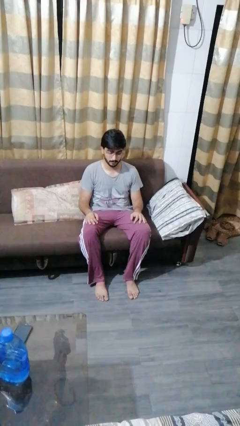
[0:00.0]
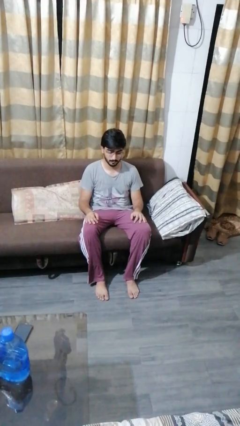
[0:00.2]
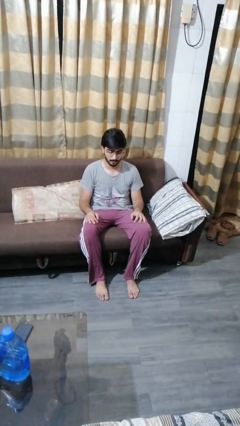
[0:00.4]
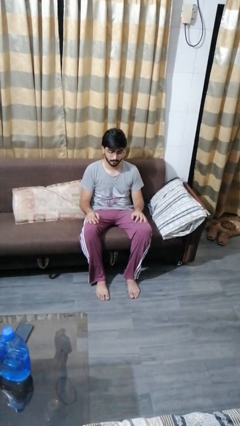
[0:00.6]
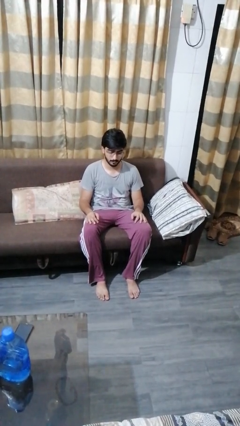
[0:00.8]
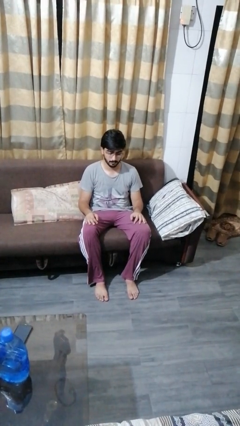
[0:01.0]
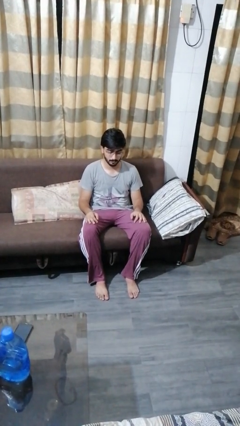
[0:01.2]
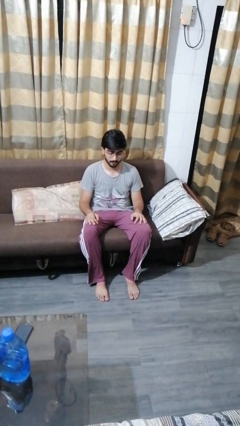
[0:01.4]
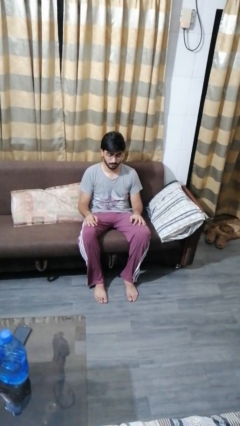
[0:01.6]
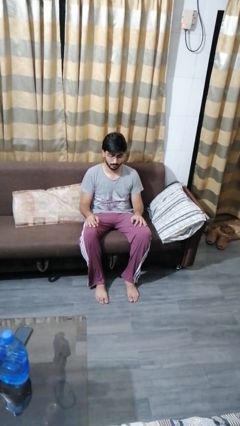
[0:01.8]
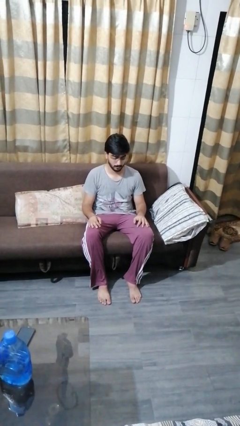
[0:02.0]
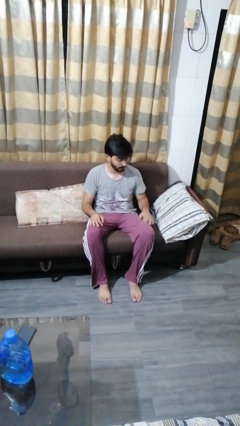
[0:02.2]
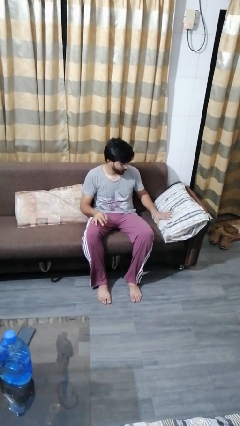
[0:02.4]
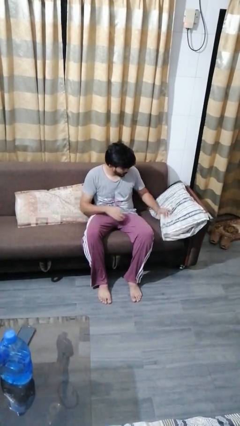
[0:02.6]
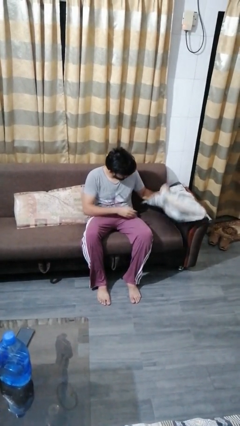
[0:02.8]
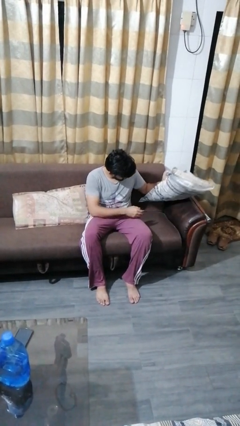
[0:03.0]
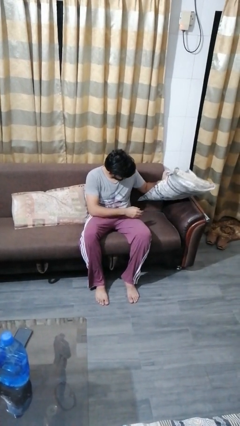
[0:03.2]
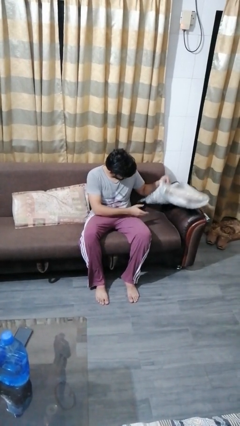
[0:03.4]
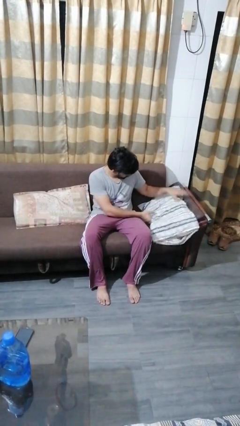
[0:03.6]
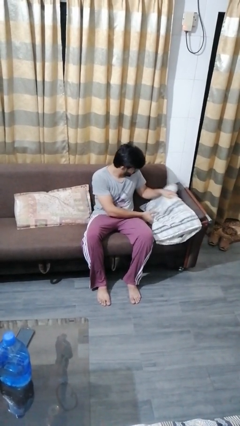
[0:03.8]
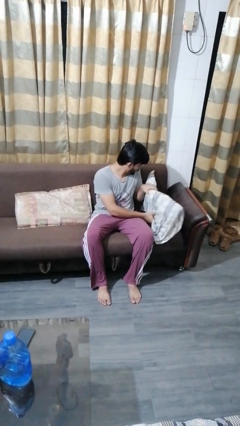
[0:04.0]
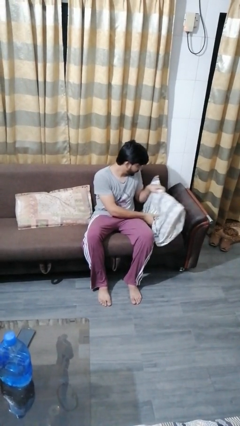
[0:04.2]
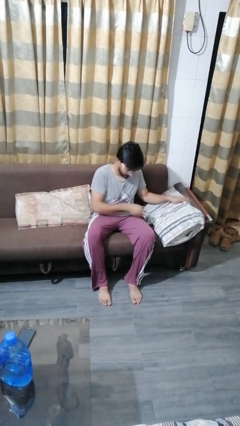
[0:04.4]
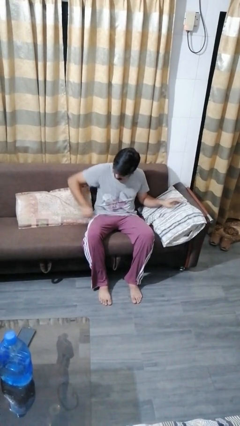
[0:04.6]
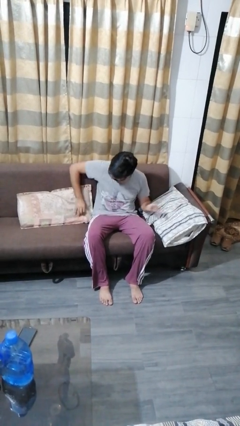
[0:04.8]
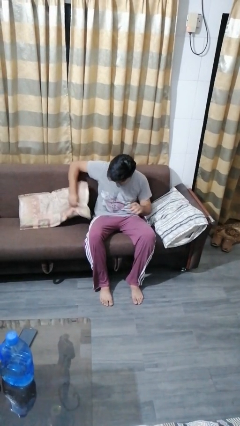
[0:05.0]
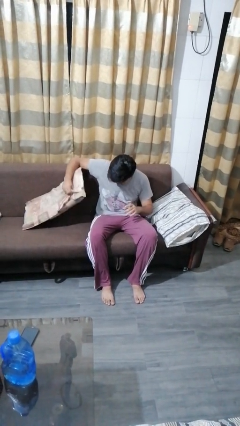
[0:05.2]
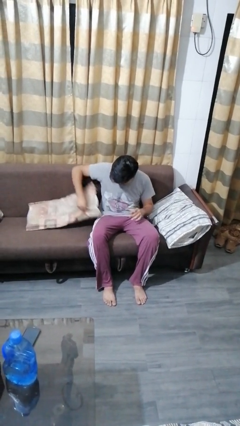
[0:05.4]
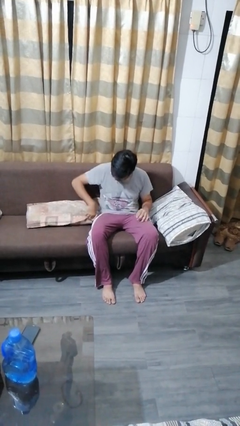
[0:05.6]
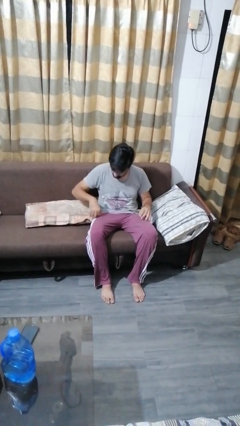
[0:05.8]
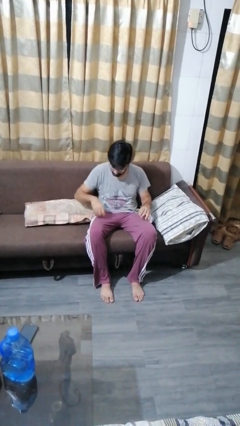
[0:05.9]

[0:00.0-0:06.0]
person searches in couch

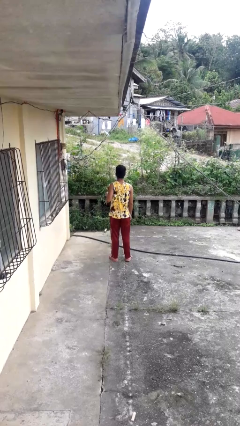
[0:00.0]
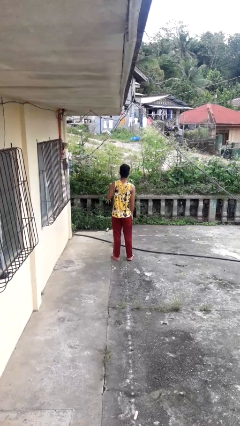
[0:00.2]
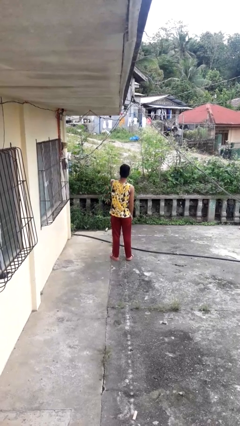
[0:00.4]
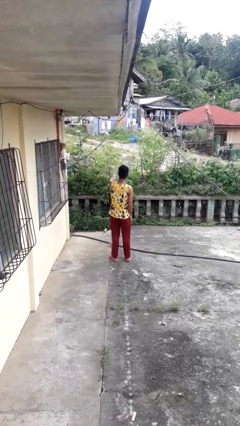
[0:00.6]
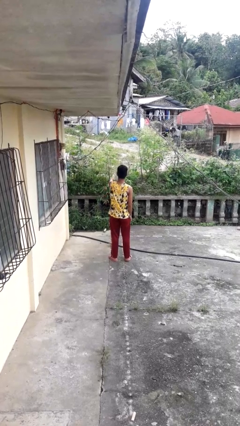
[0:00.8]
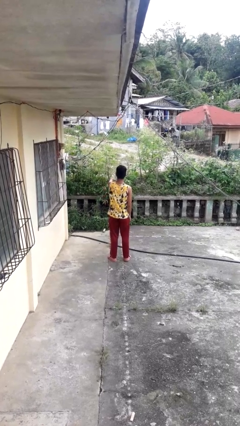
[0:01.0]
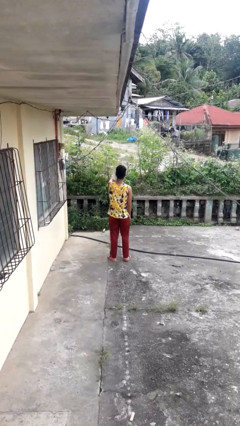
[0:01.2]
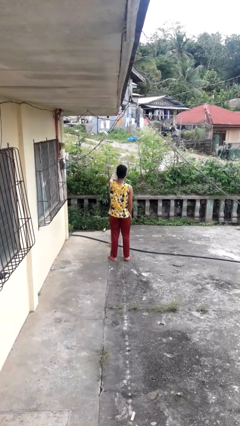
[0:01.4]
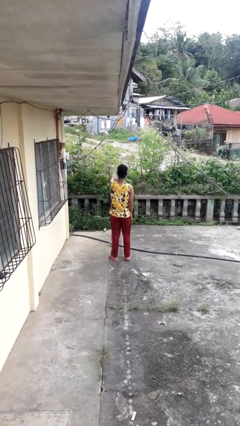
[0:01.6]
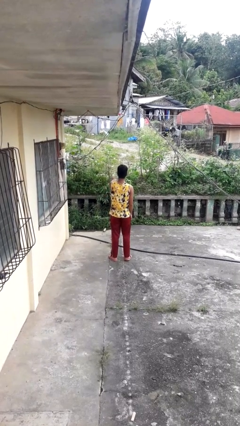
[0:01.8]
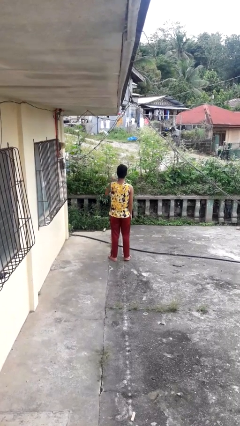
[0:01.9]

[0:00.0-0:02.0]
person punches

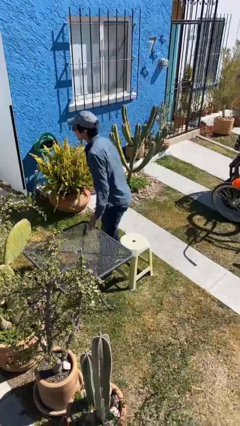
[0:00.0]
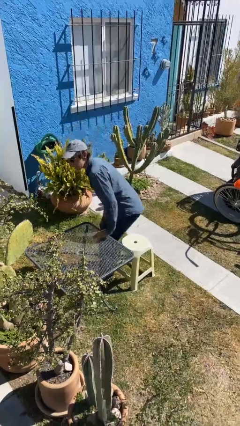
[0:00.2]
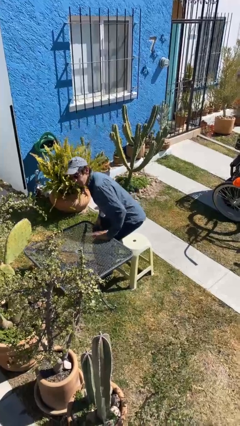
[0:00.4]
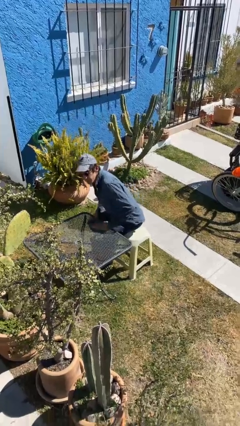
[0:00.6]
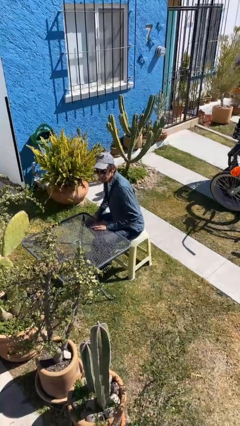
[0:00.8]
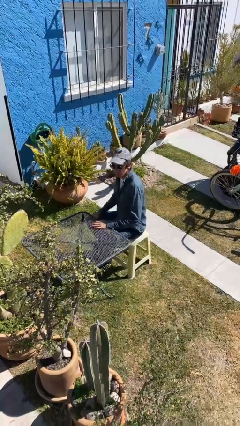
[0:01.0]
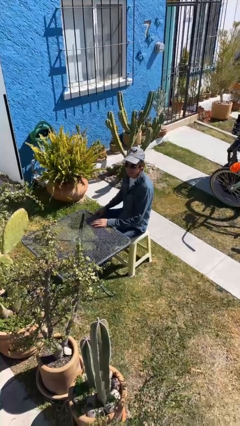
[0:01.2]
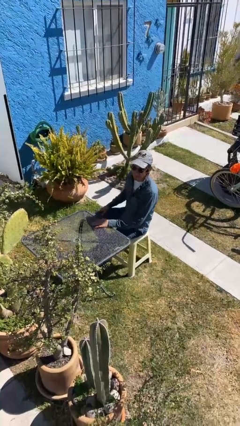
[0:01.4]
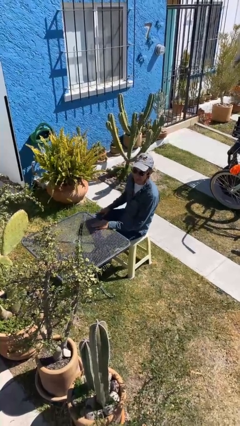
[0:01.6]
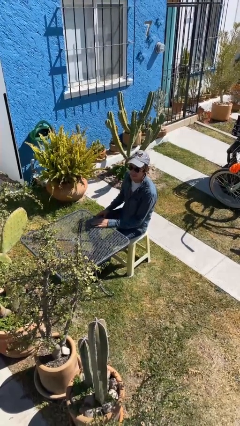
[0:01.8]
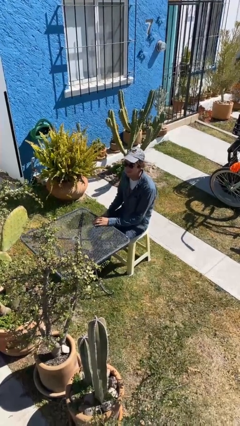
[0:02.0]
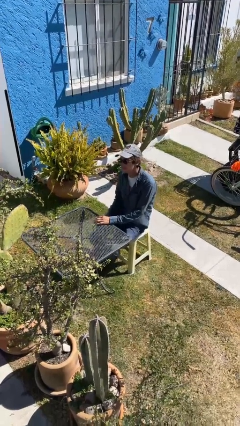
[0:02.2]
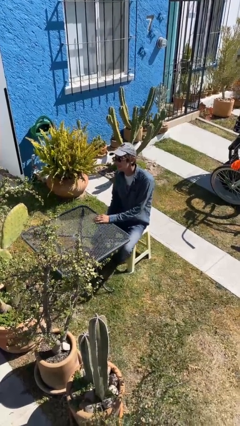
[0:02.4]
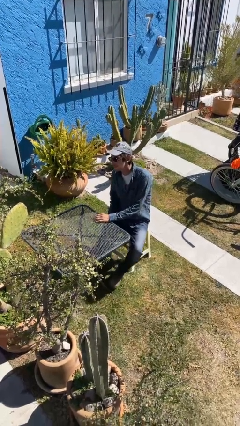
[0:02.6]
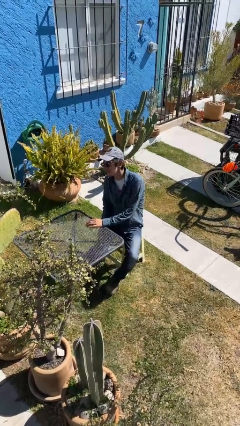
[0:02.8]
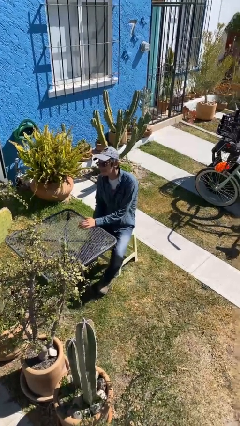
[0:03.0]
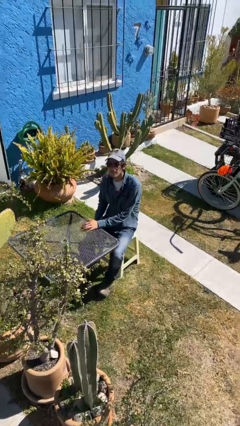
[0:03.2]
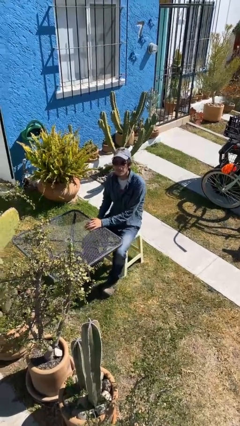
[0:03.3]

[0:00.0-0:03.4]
person sits down

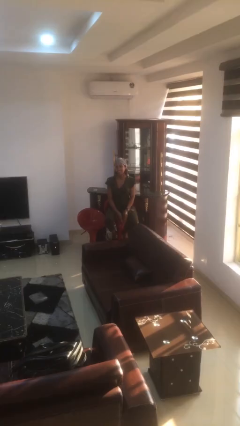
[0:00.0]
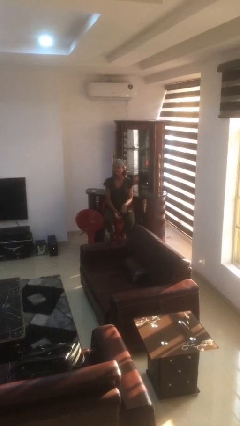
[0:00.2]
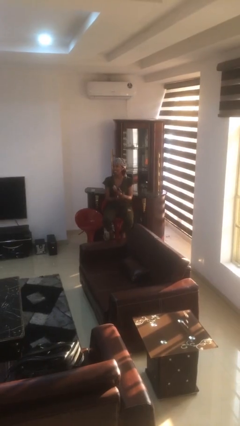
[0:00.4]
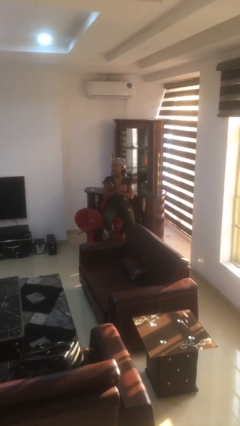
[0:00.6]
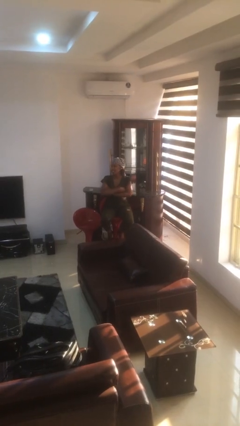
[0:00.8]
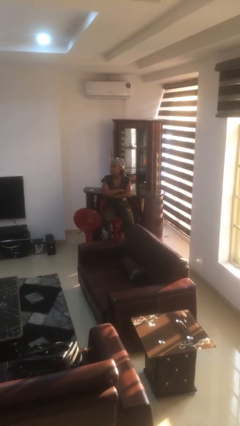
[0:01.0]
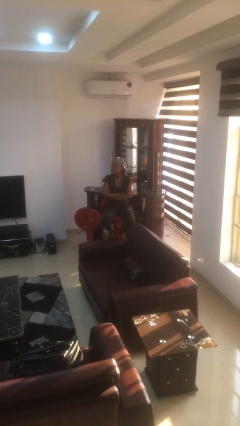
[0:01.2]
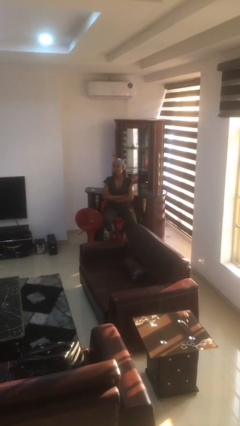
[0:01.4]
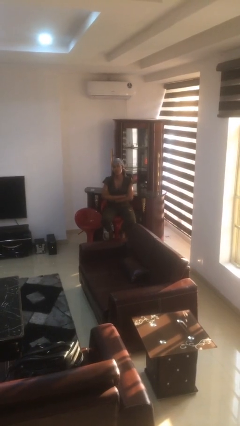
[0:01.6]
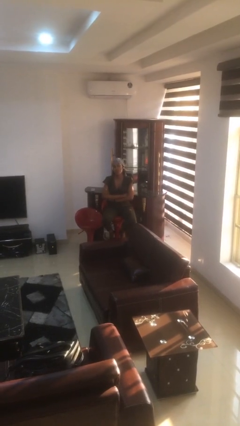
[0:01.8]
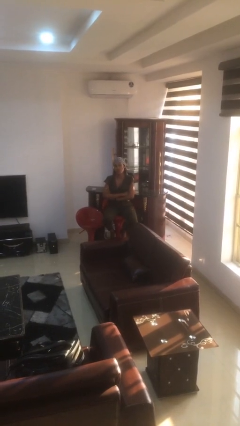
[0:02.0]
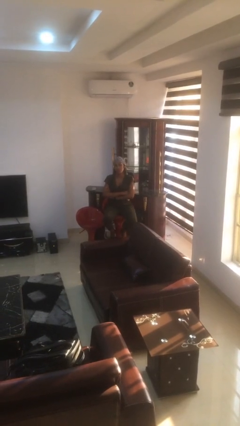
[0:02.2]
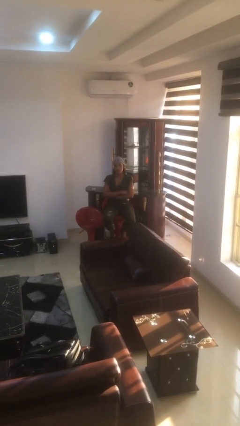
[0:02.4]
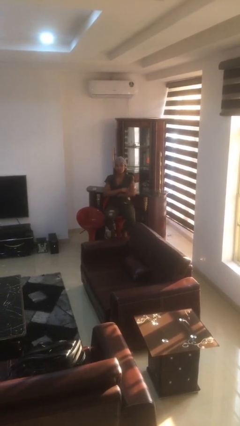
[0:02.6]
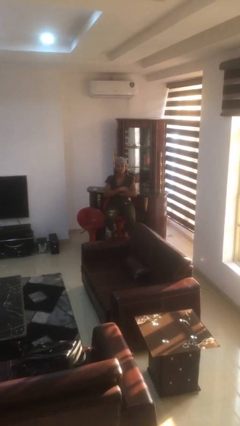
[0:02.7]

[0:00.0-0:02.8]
person crosses arms

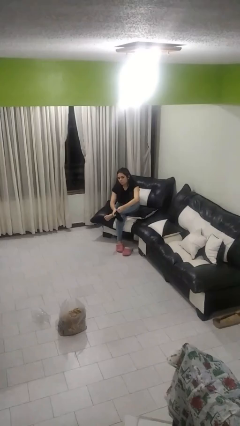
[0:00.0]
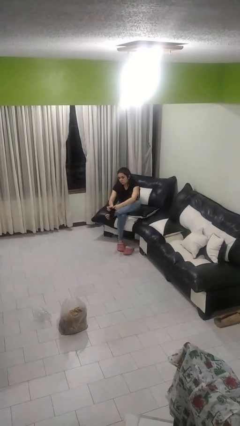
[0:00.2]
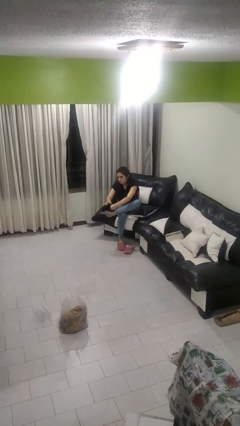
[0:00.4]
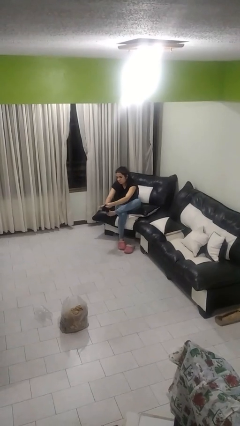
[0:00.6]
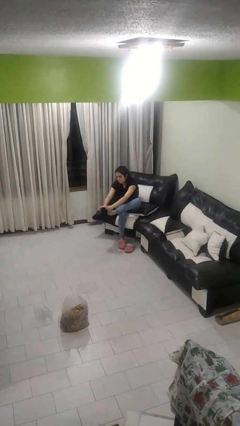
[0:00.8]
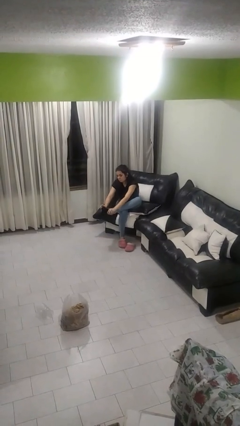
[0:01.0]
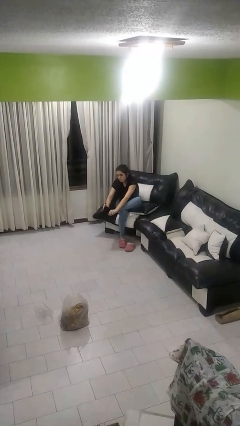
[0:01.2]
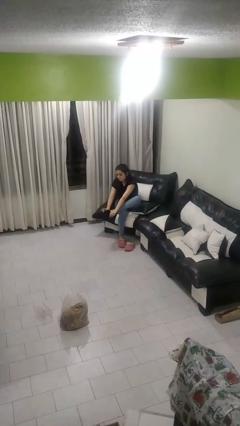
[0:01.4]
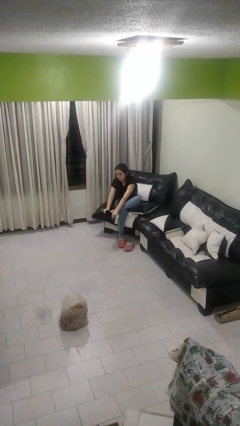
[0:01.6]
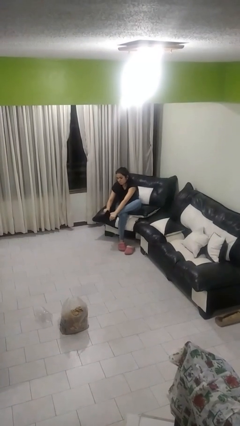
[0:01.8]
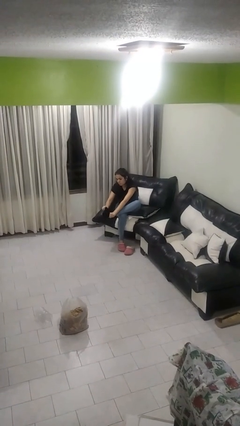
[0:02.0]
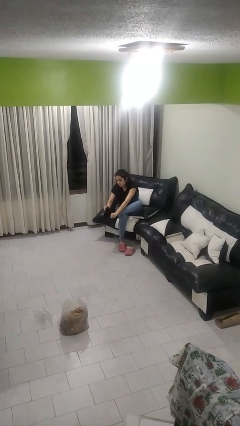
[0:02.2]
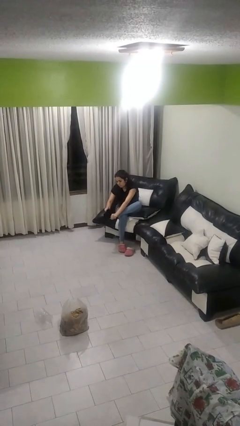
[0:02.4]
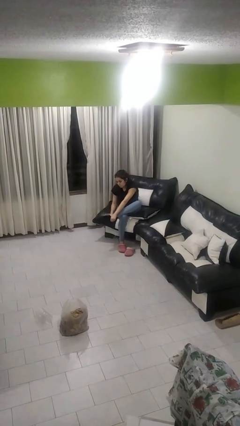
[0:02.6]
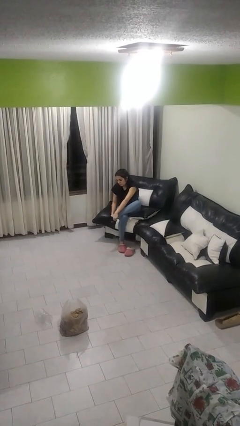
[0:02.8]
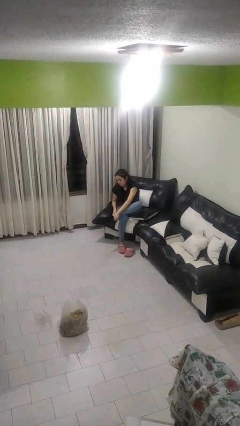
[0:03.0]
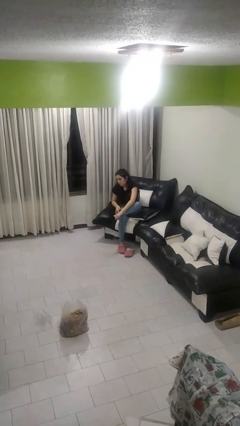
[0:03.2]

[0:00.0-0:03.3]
person puts on socks
